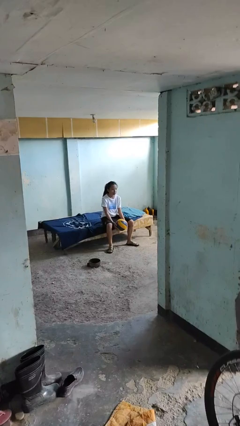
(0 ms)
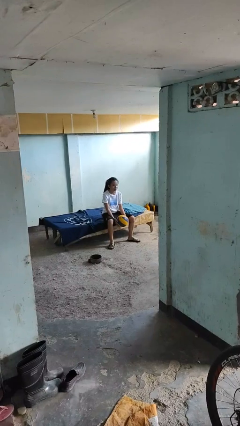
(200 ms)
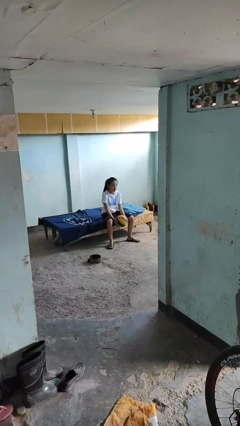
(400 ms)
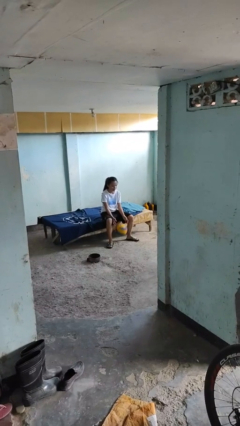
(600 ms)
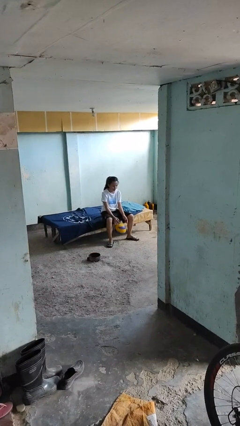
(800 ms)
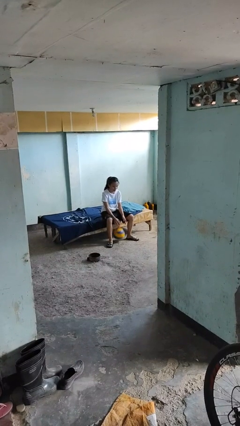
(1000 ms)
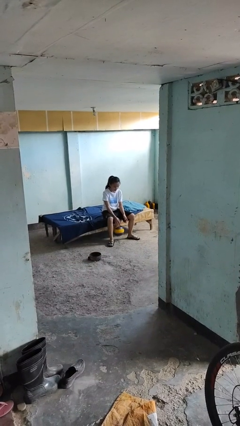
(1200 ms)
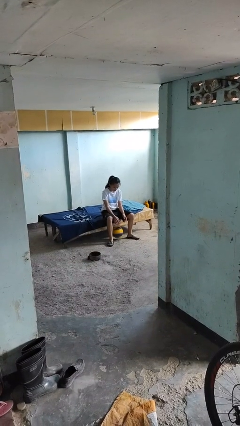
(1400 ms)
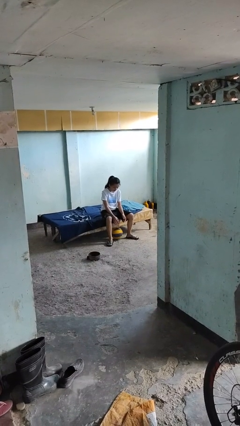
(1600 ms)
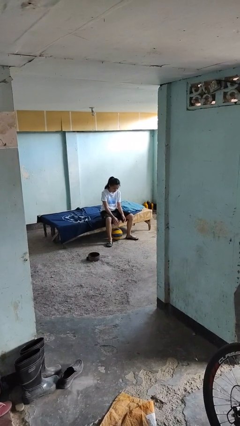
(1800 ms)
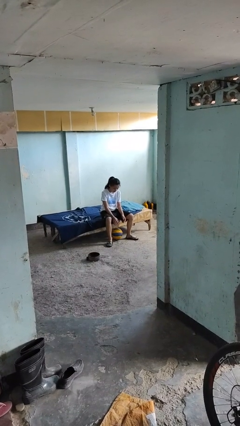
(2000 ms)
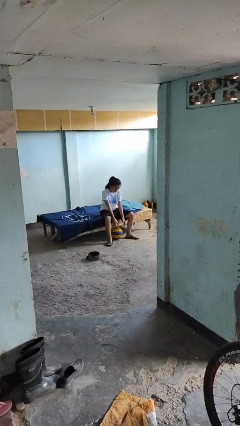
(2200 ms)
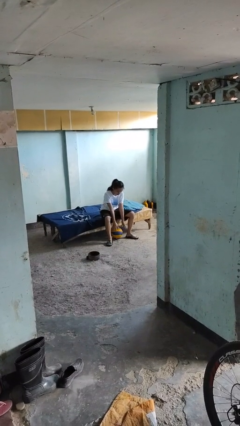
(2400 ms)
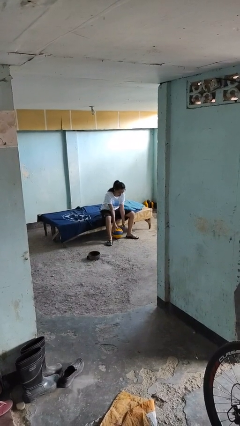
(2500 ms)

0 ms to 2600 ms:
person drops object

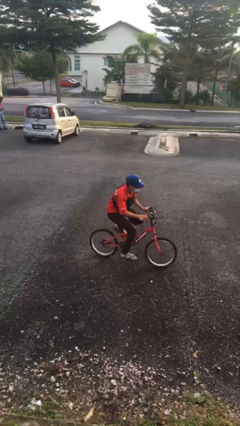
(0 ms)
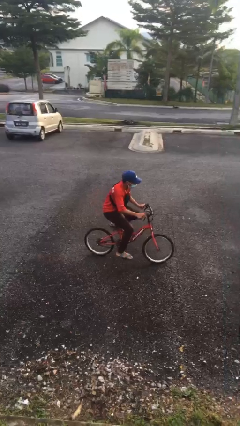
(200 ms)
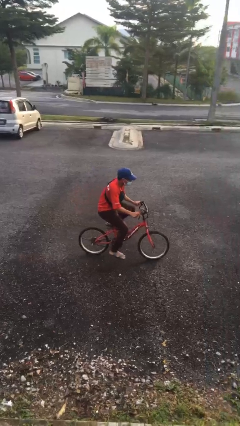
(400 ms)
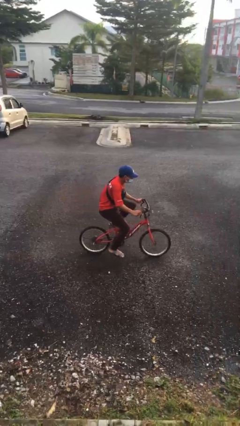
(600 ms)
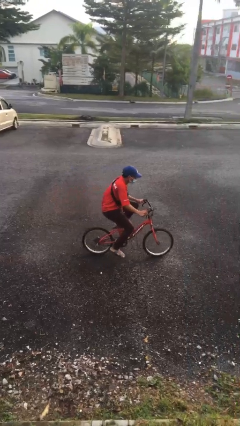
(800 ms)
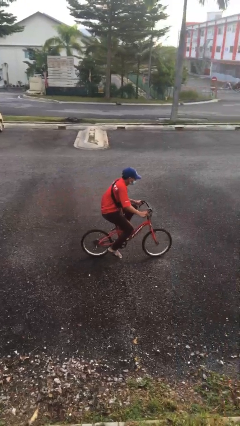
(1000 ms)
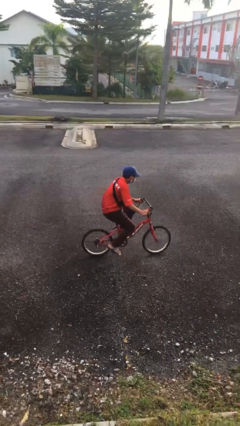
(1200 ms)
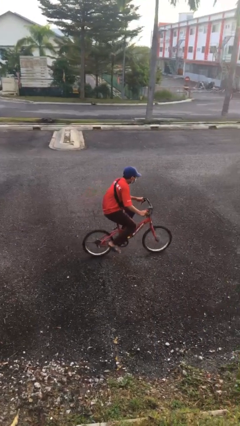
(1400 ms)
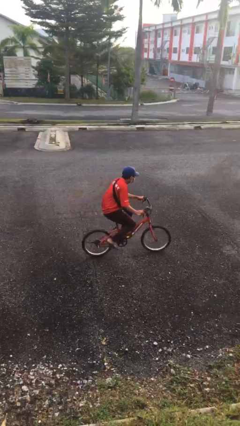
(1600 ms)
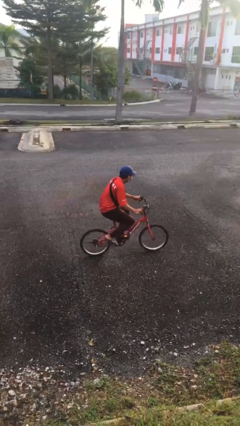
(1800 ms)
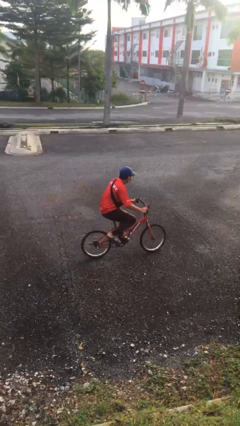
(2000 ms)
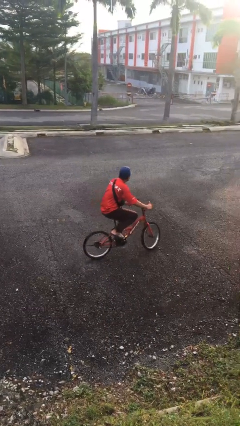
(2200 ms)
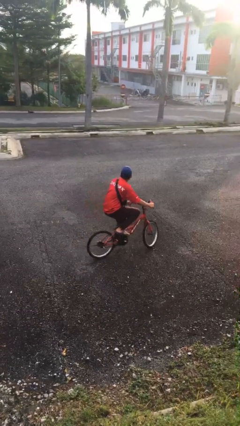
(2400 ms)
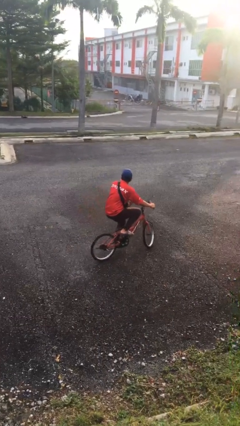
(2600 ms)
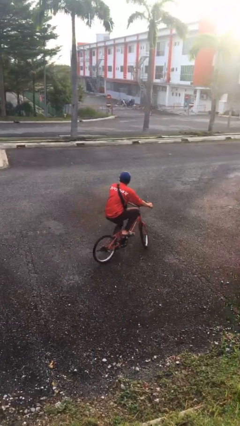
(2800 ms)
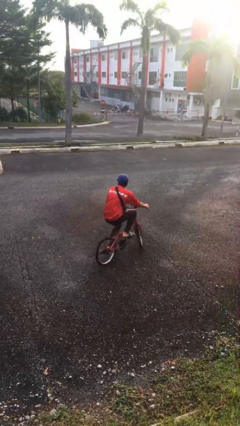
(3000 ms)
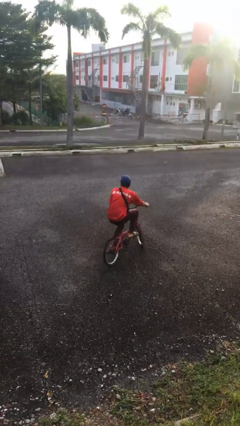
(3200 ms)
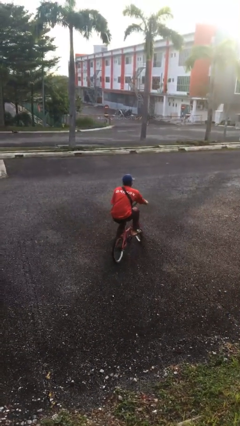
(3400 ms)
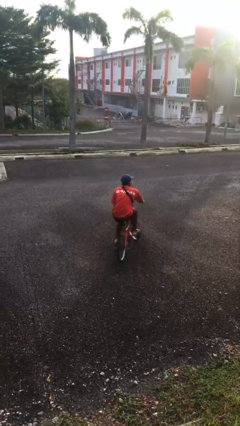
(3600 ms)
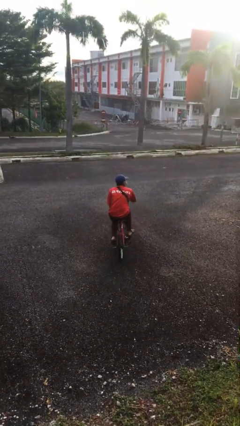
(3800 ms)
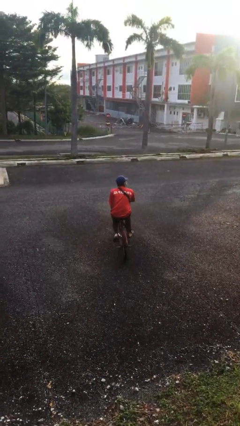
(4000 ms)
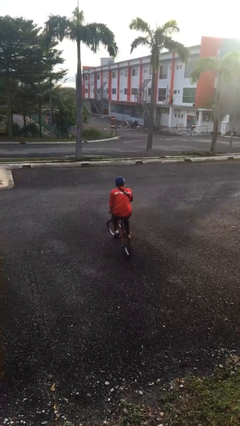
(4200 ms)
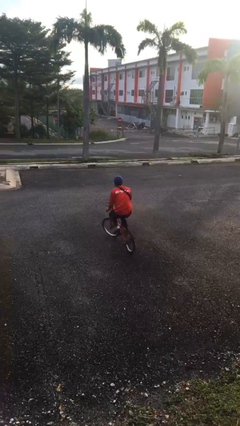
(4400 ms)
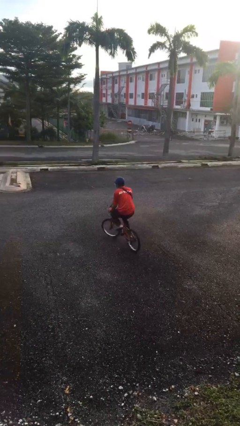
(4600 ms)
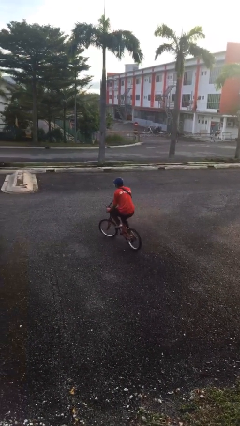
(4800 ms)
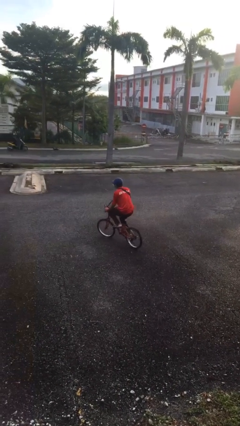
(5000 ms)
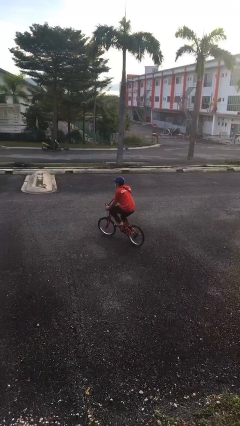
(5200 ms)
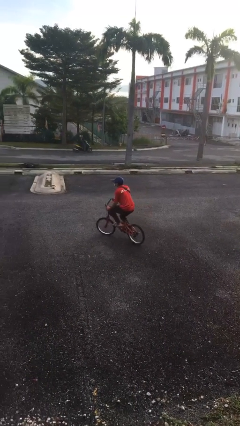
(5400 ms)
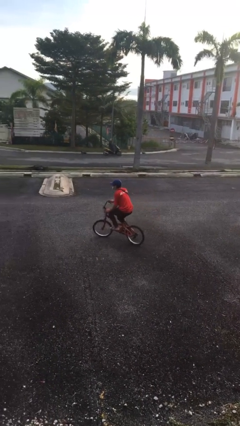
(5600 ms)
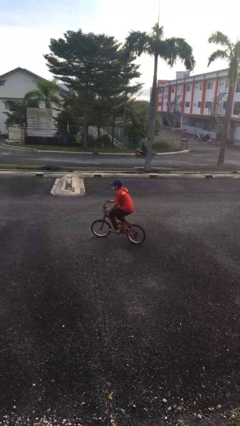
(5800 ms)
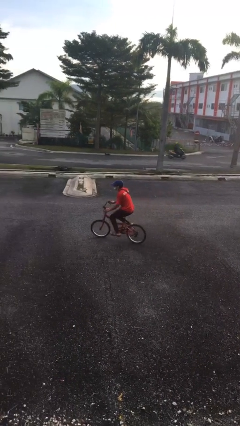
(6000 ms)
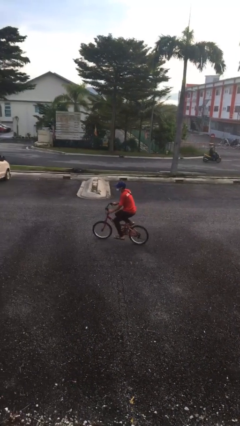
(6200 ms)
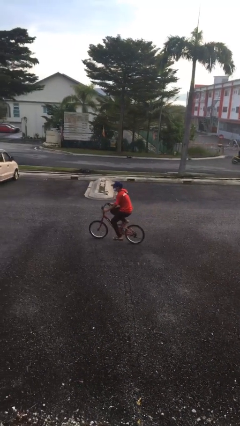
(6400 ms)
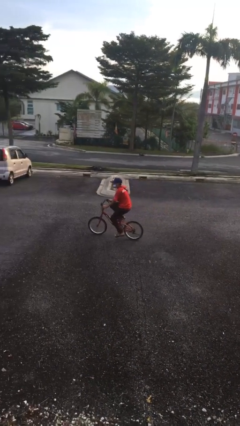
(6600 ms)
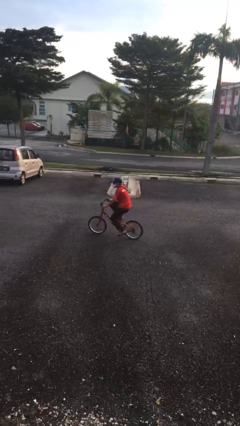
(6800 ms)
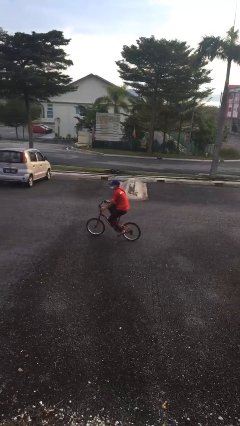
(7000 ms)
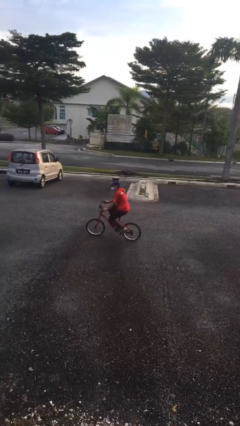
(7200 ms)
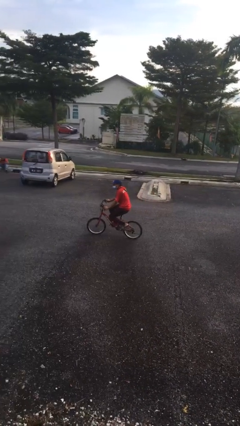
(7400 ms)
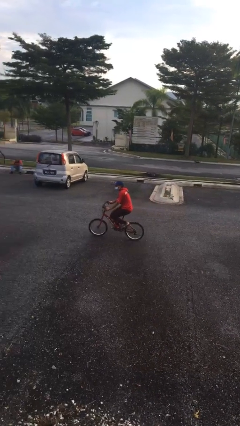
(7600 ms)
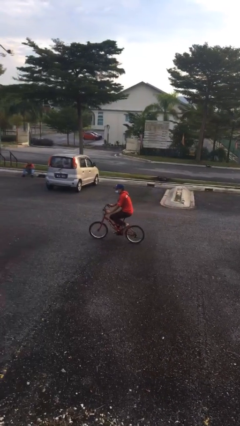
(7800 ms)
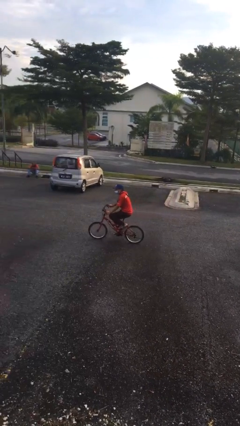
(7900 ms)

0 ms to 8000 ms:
person rides bicycle

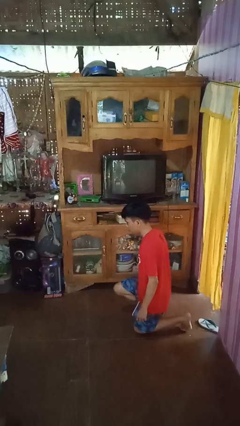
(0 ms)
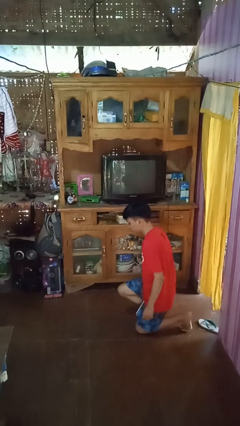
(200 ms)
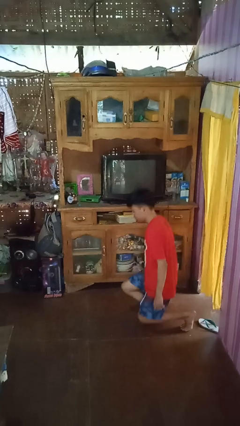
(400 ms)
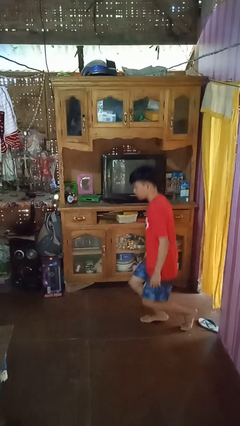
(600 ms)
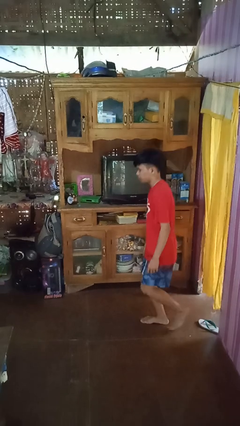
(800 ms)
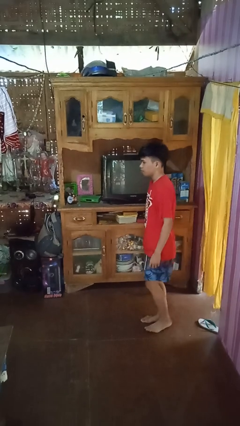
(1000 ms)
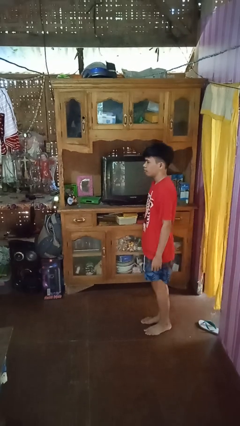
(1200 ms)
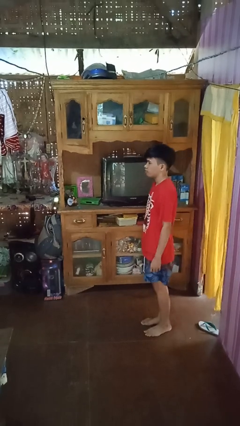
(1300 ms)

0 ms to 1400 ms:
person stands up from floor

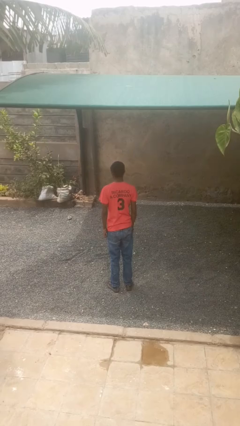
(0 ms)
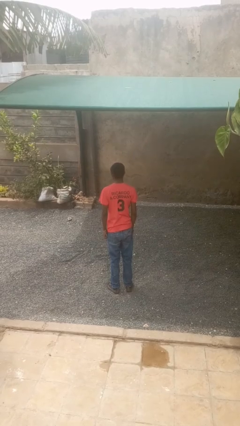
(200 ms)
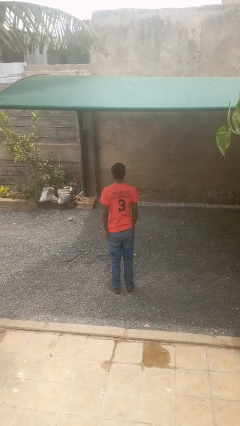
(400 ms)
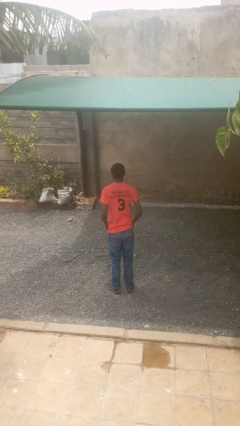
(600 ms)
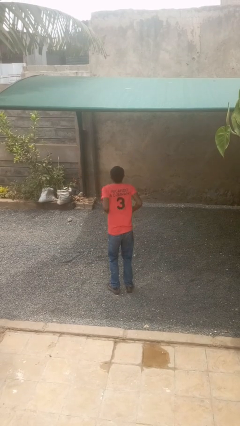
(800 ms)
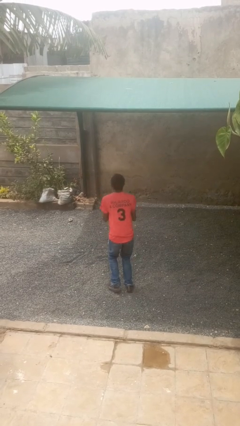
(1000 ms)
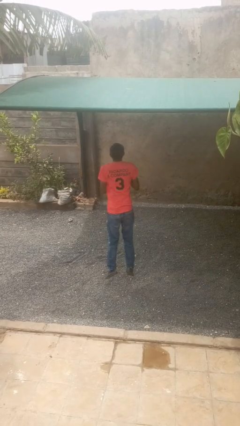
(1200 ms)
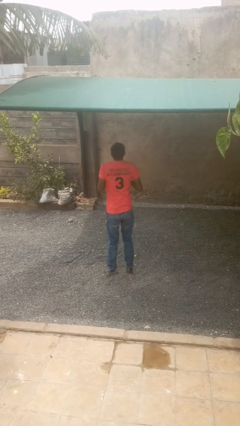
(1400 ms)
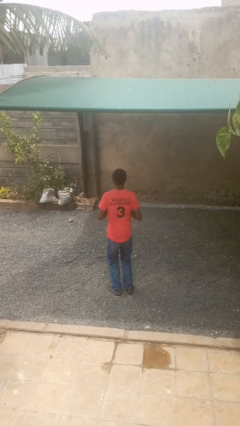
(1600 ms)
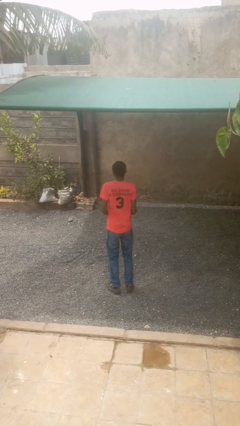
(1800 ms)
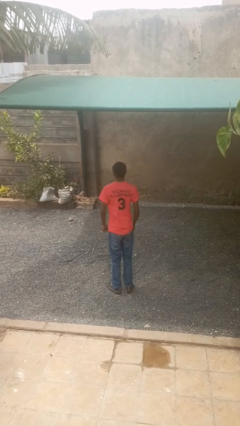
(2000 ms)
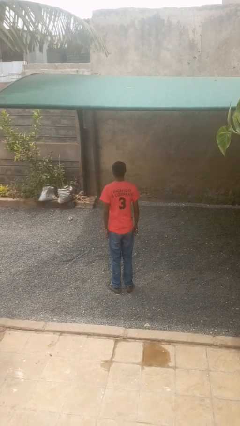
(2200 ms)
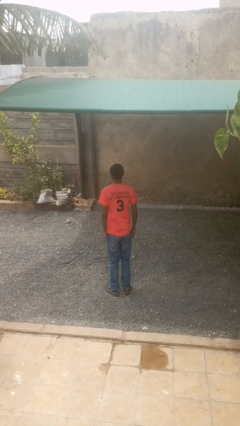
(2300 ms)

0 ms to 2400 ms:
person jumps

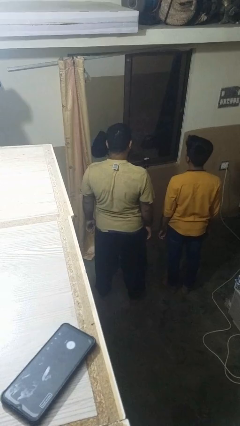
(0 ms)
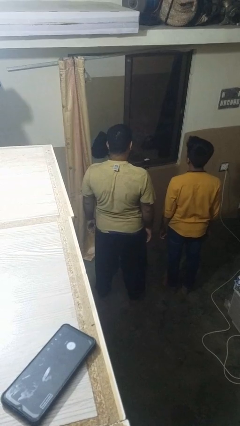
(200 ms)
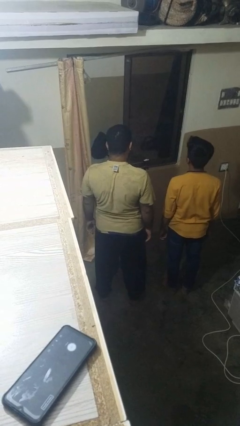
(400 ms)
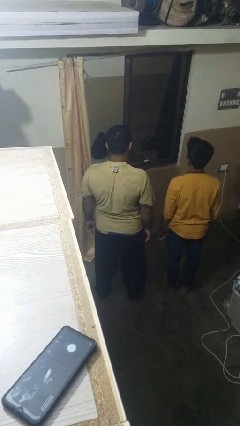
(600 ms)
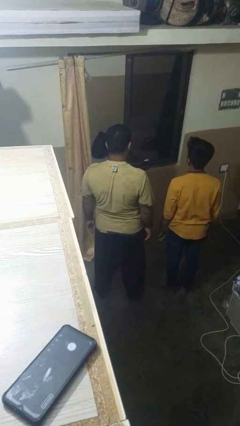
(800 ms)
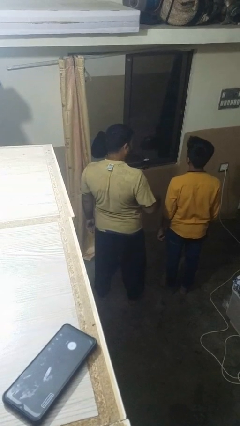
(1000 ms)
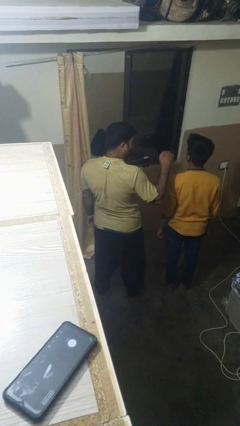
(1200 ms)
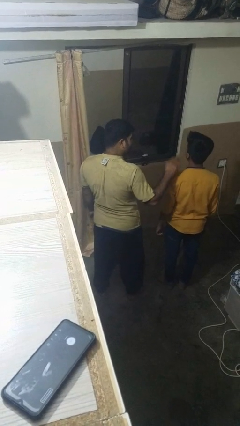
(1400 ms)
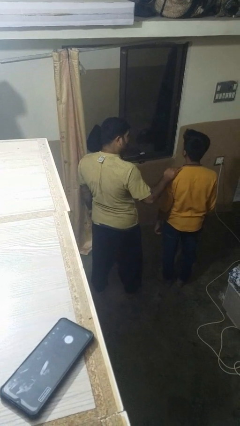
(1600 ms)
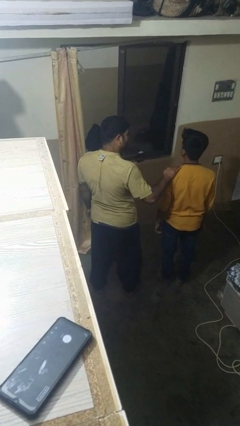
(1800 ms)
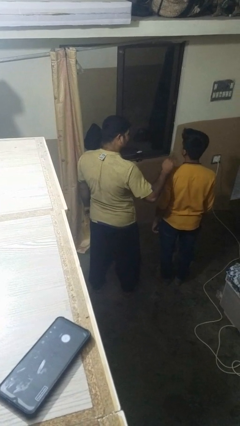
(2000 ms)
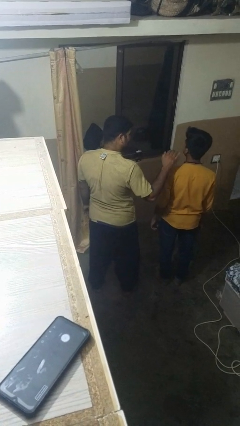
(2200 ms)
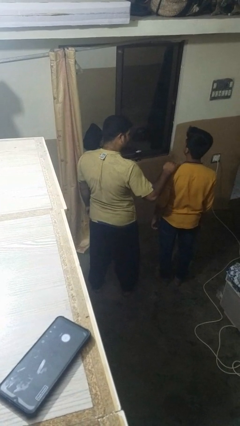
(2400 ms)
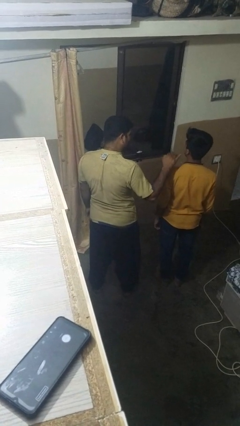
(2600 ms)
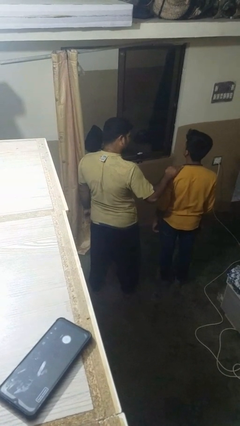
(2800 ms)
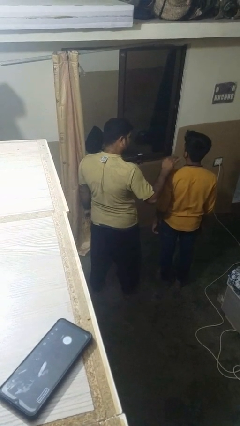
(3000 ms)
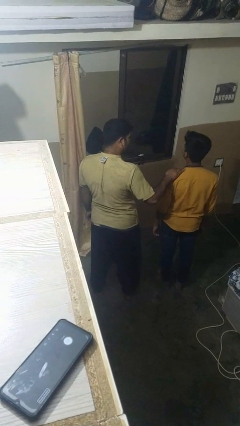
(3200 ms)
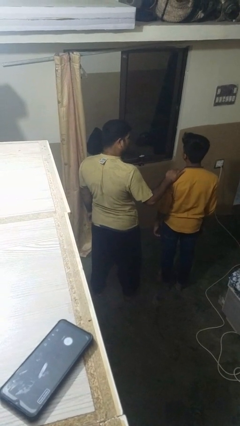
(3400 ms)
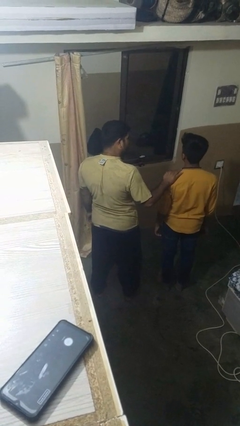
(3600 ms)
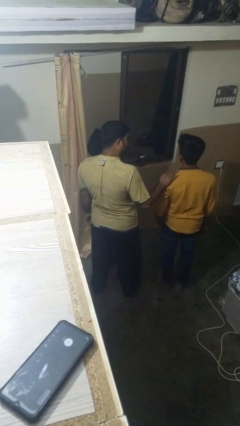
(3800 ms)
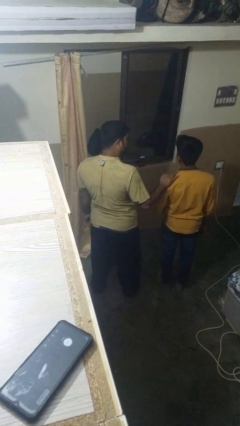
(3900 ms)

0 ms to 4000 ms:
person pounds shoulders of person
